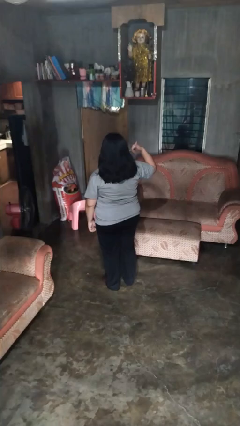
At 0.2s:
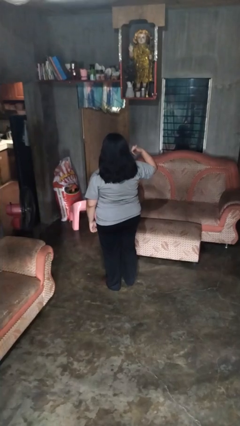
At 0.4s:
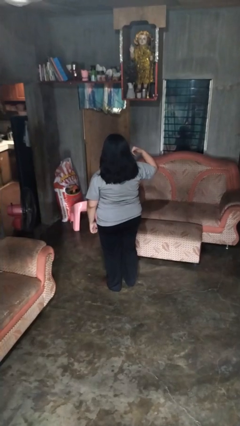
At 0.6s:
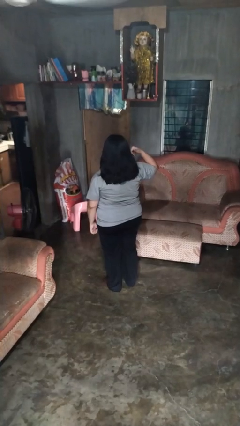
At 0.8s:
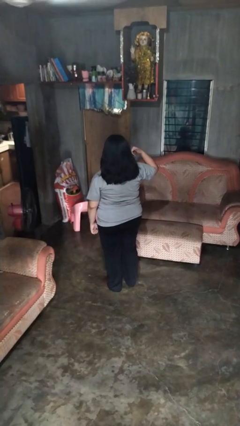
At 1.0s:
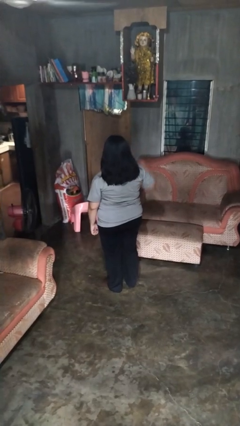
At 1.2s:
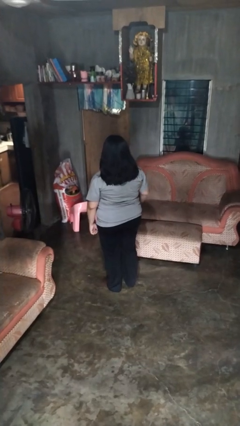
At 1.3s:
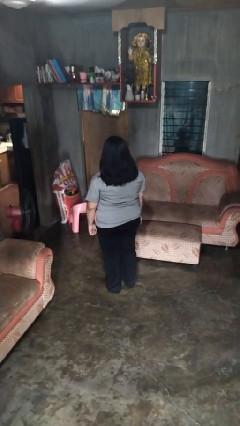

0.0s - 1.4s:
person gestures call me

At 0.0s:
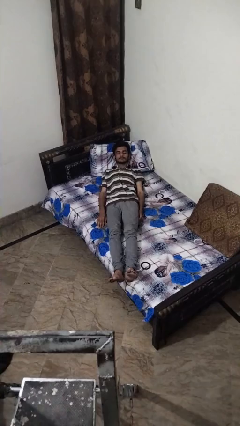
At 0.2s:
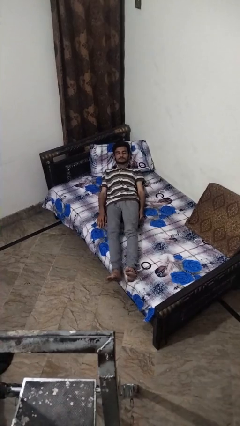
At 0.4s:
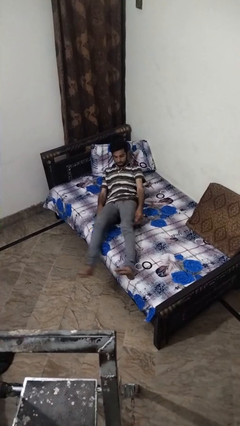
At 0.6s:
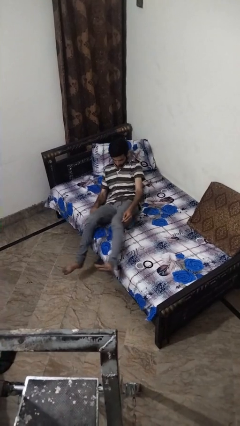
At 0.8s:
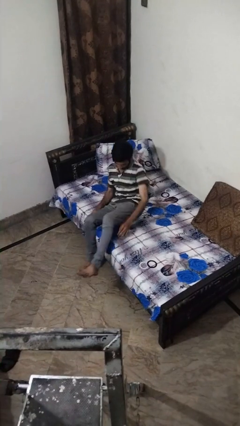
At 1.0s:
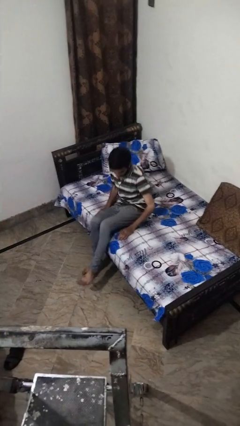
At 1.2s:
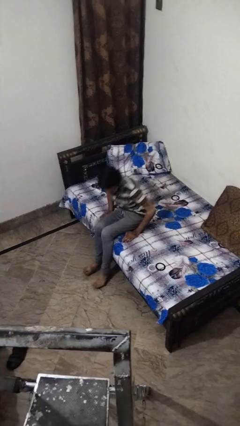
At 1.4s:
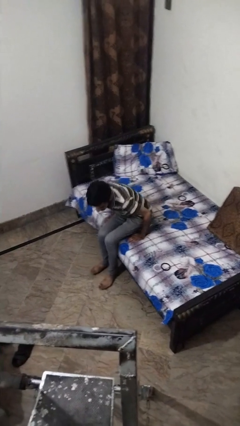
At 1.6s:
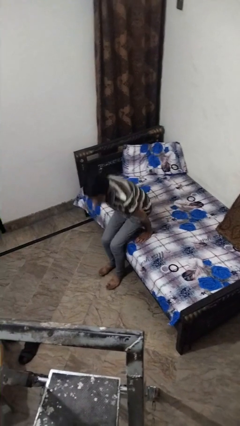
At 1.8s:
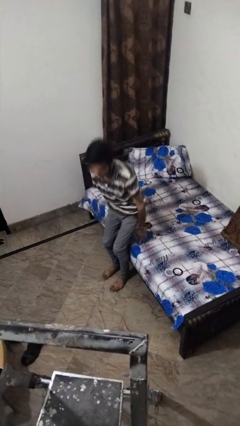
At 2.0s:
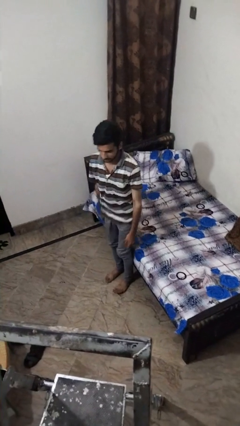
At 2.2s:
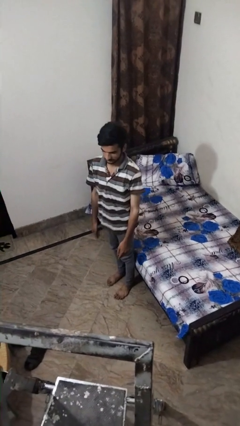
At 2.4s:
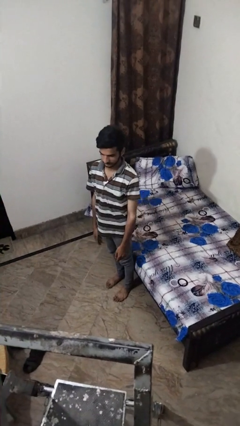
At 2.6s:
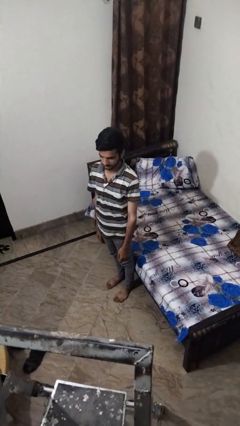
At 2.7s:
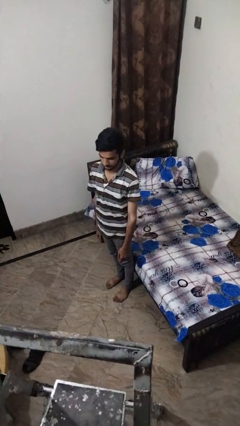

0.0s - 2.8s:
person stands up

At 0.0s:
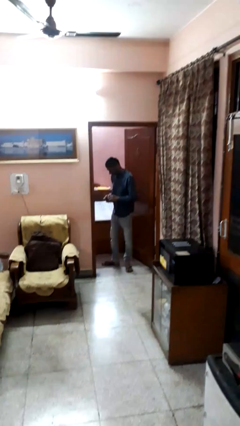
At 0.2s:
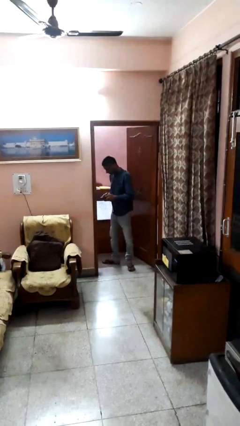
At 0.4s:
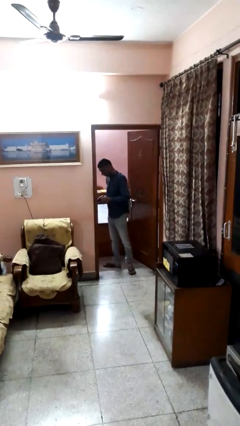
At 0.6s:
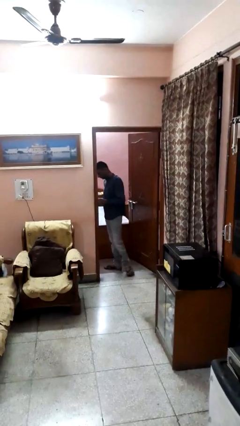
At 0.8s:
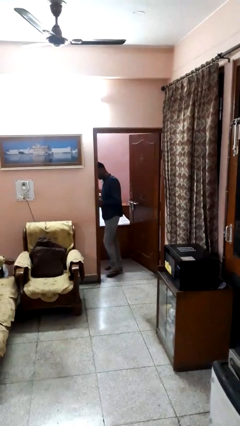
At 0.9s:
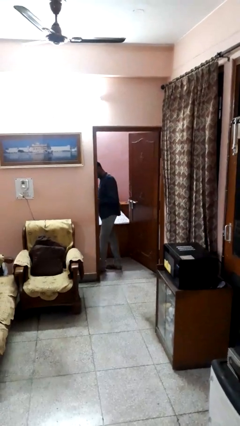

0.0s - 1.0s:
person exits scene through structure

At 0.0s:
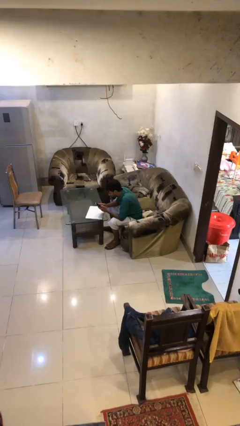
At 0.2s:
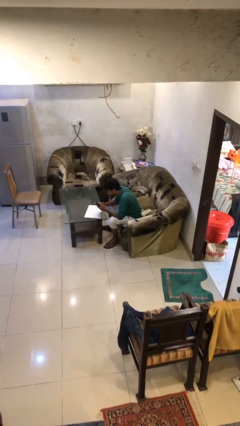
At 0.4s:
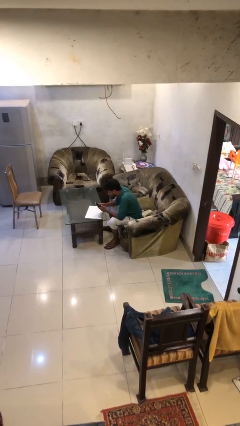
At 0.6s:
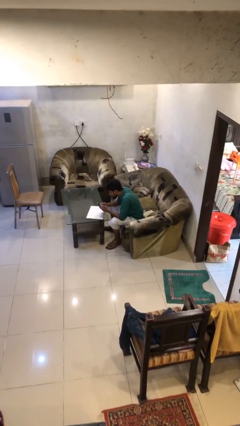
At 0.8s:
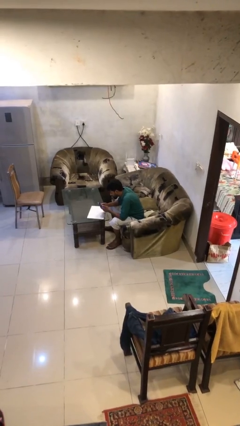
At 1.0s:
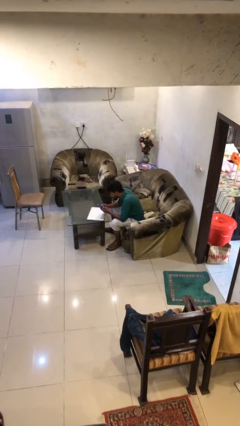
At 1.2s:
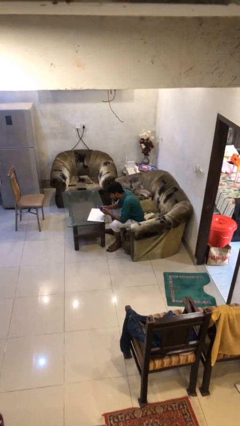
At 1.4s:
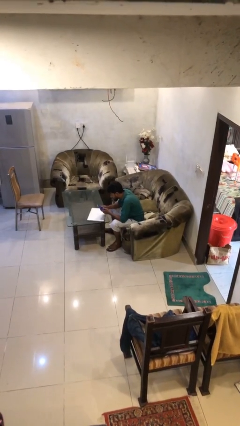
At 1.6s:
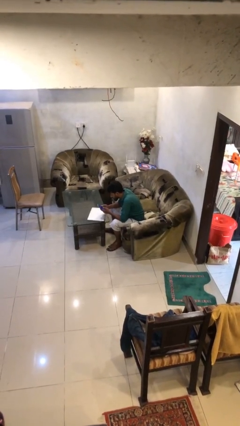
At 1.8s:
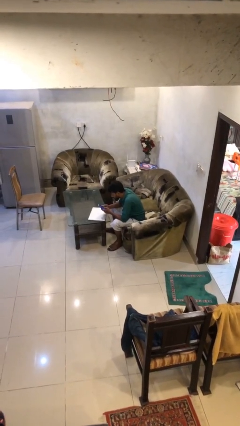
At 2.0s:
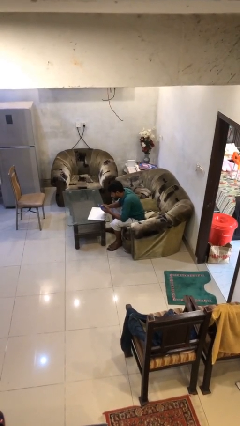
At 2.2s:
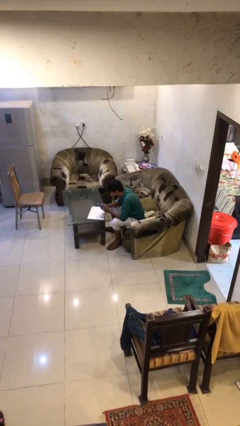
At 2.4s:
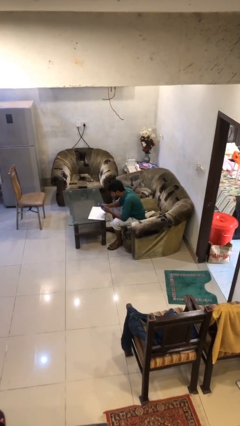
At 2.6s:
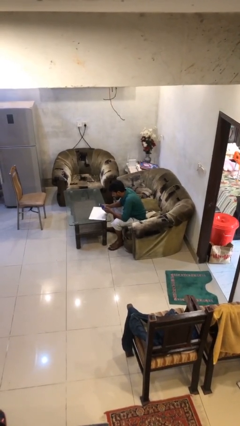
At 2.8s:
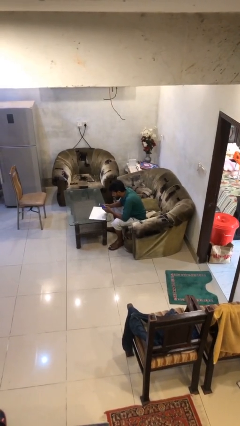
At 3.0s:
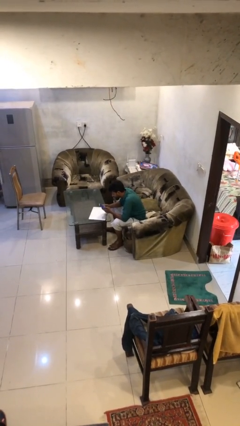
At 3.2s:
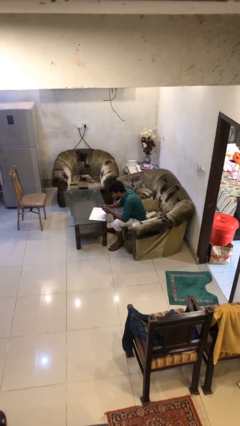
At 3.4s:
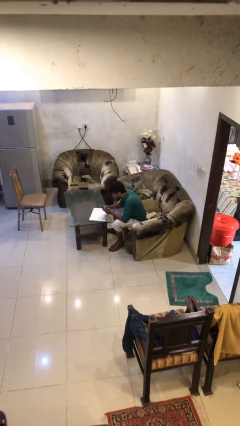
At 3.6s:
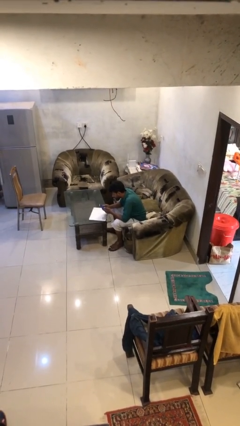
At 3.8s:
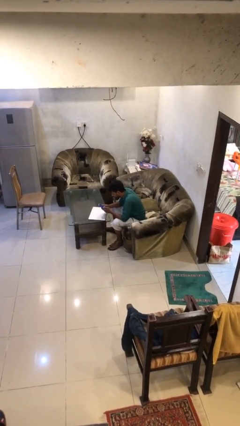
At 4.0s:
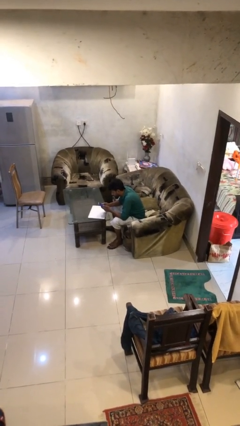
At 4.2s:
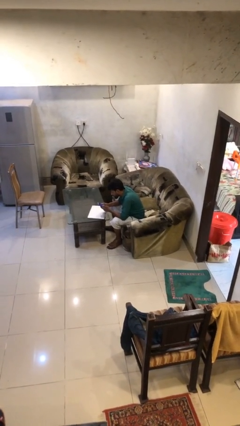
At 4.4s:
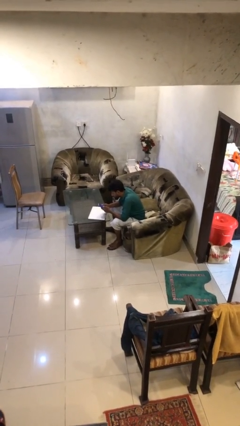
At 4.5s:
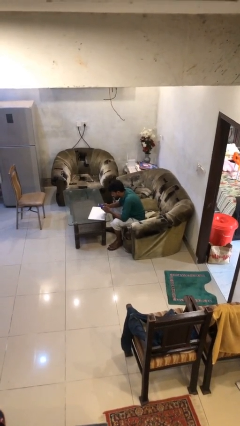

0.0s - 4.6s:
person texts on phone

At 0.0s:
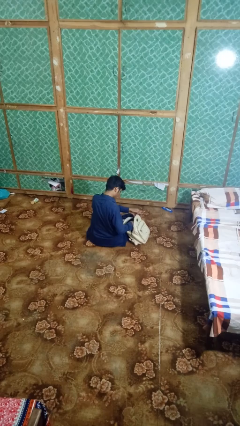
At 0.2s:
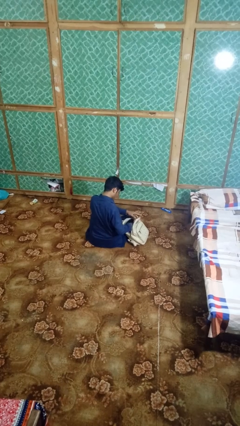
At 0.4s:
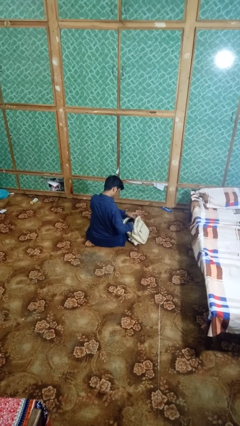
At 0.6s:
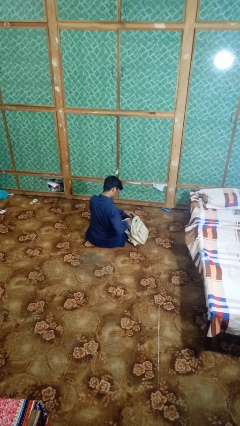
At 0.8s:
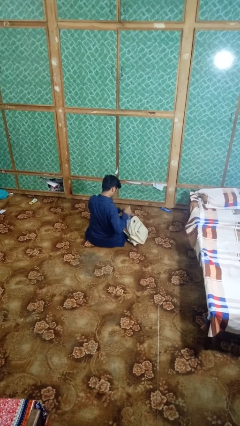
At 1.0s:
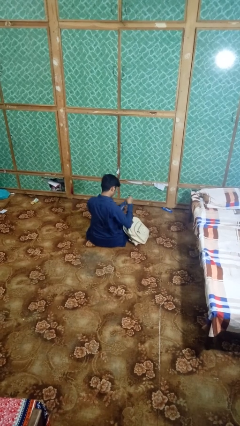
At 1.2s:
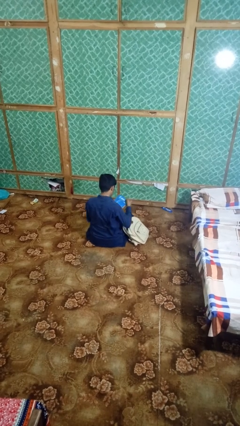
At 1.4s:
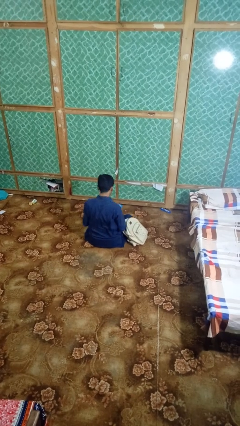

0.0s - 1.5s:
person takes object from backpack

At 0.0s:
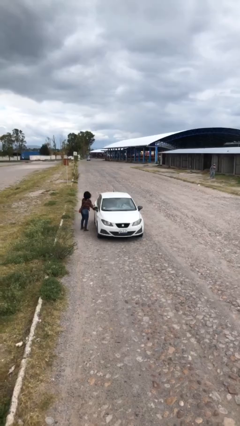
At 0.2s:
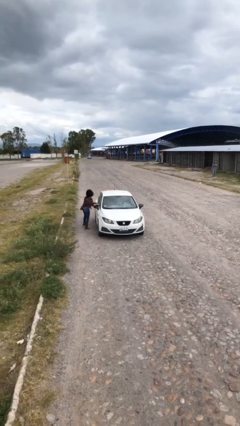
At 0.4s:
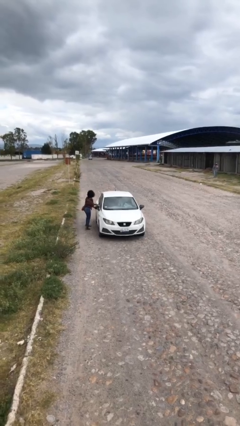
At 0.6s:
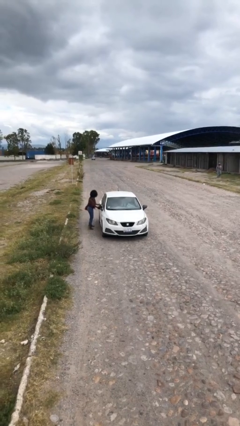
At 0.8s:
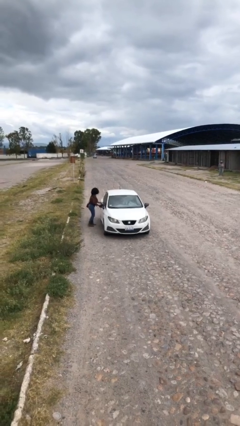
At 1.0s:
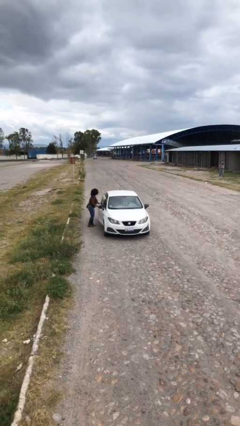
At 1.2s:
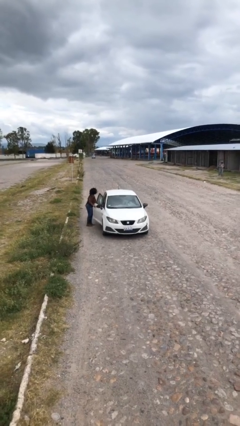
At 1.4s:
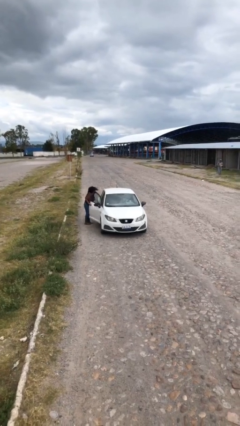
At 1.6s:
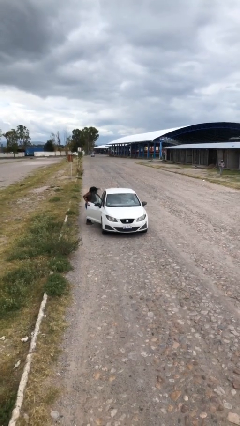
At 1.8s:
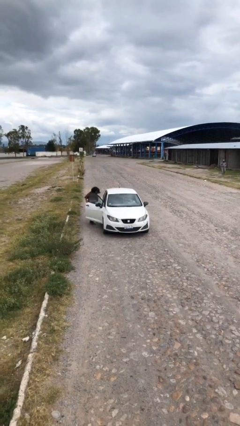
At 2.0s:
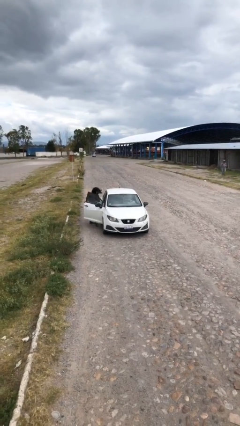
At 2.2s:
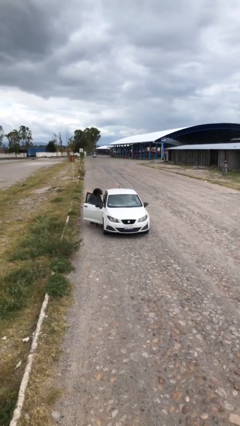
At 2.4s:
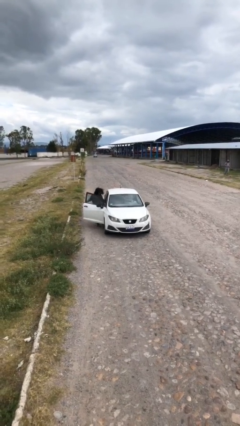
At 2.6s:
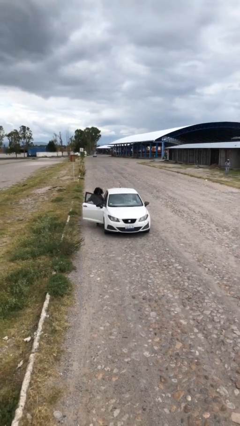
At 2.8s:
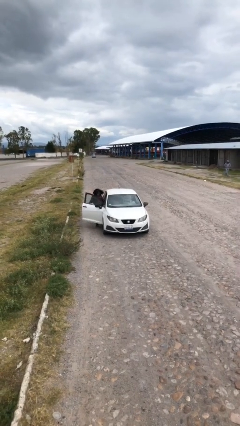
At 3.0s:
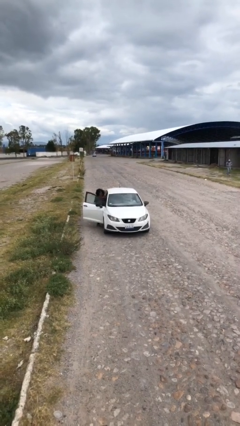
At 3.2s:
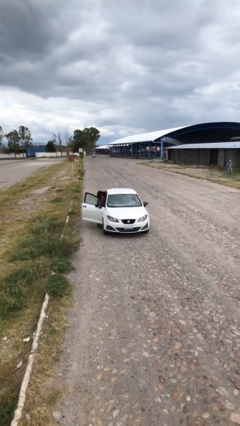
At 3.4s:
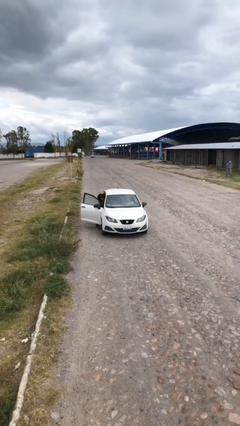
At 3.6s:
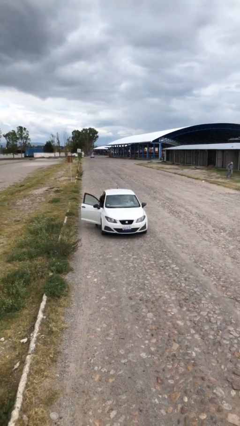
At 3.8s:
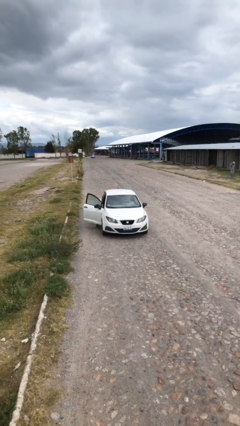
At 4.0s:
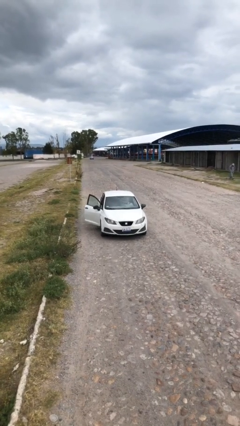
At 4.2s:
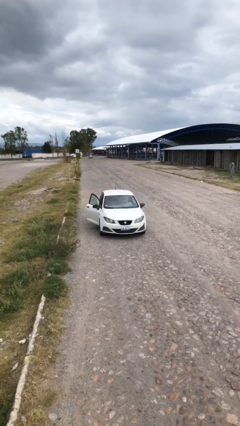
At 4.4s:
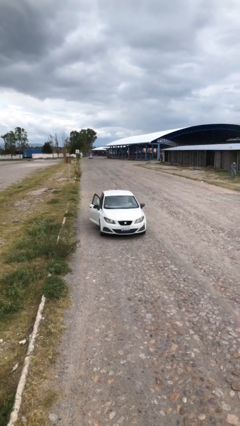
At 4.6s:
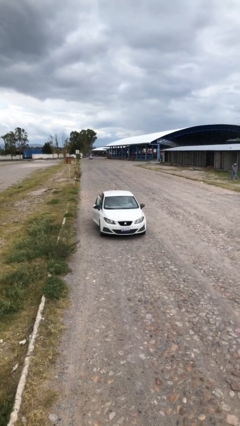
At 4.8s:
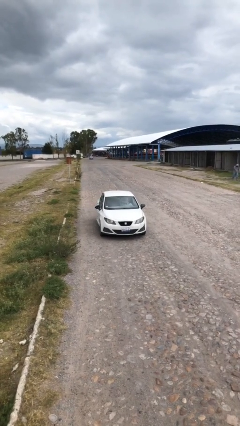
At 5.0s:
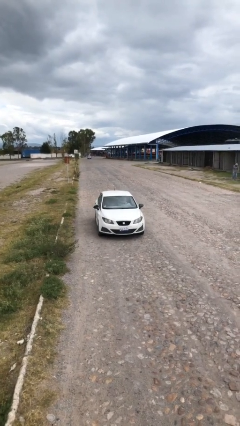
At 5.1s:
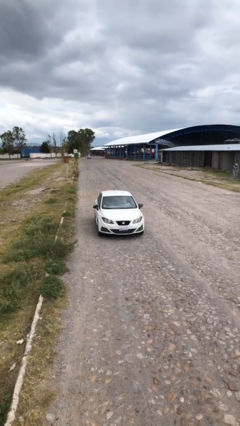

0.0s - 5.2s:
car picks up person

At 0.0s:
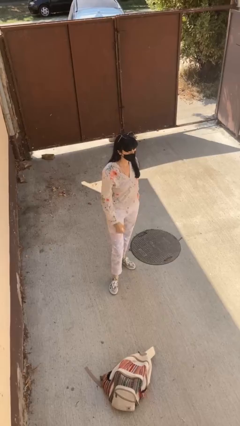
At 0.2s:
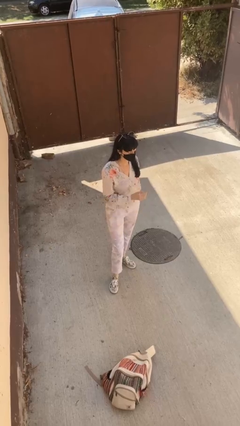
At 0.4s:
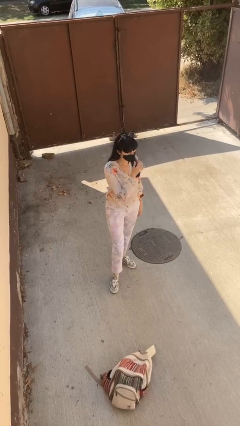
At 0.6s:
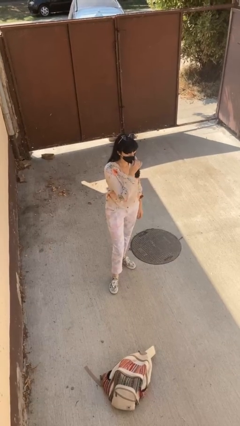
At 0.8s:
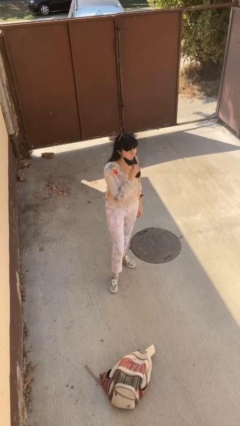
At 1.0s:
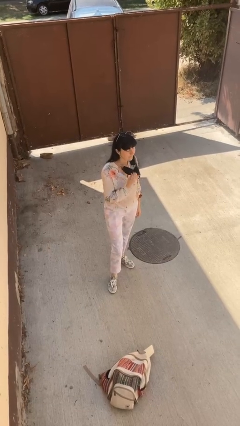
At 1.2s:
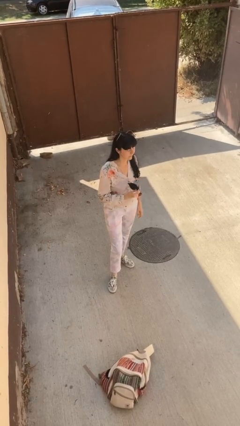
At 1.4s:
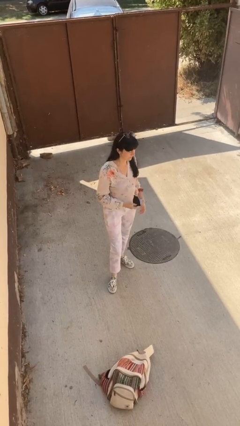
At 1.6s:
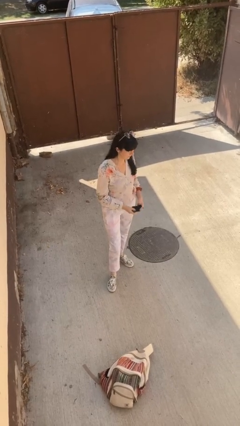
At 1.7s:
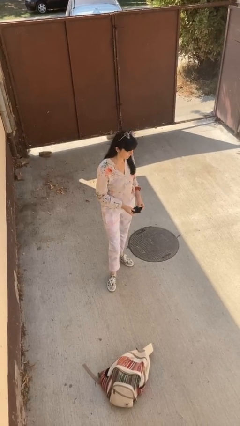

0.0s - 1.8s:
person takes off facemask
